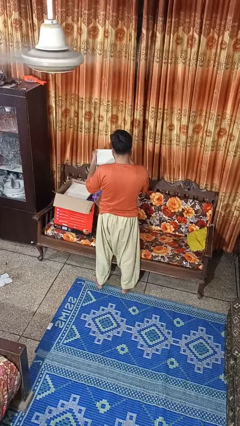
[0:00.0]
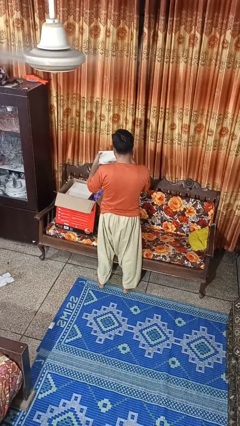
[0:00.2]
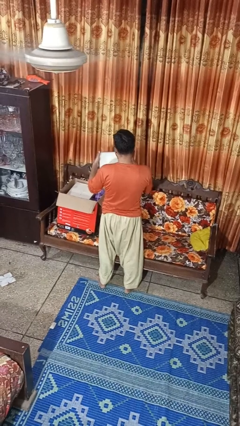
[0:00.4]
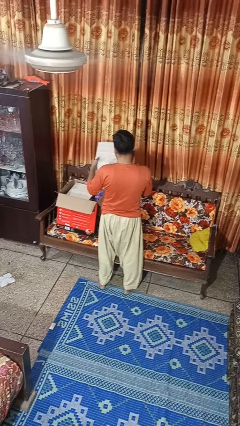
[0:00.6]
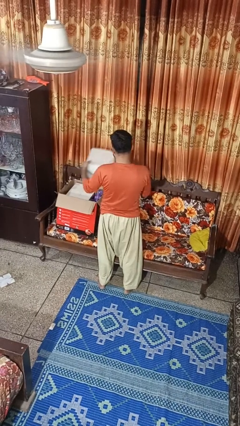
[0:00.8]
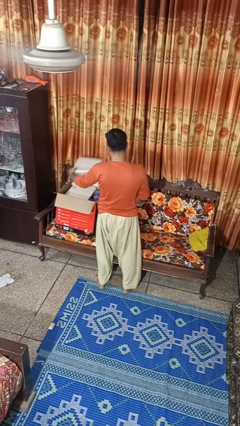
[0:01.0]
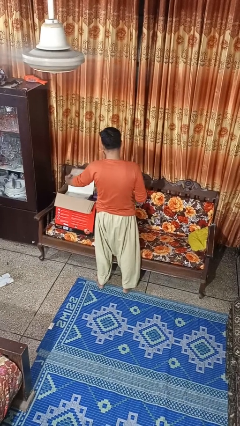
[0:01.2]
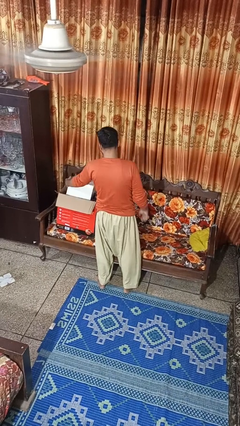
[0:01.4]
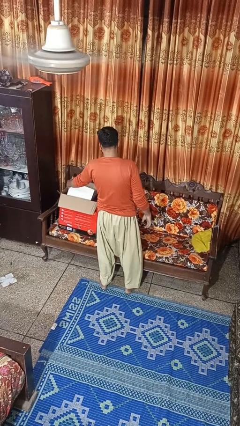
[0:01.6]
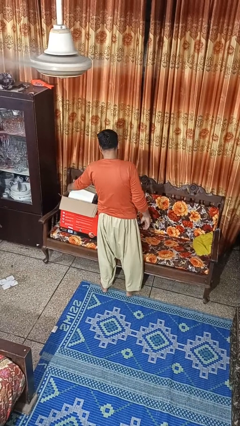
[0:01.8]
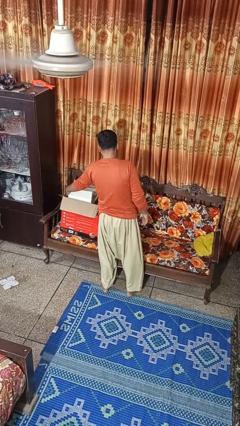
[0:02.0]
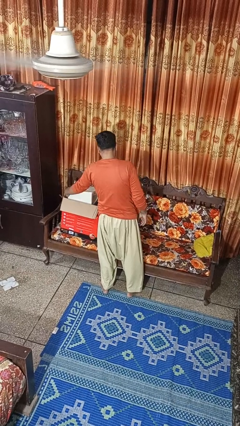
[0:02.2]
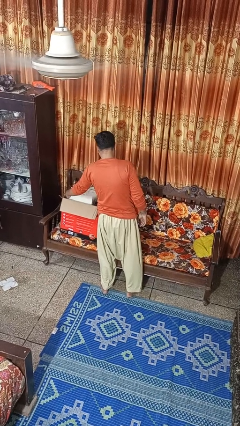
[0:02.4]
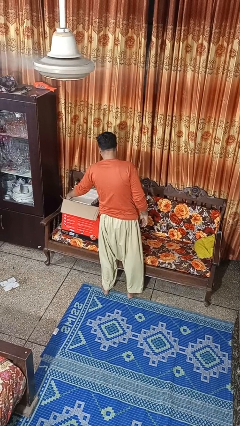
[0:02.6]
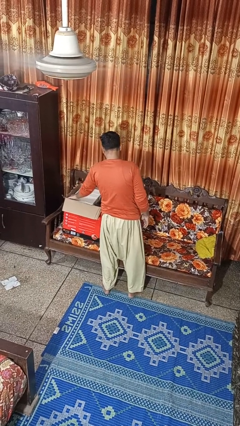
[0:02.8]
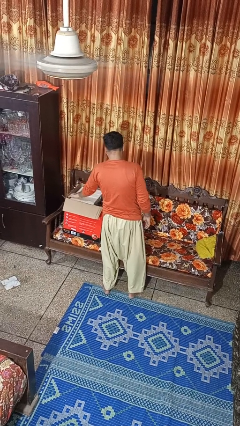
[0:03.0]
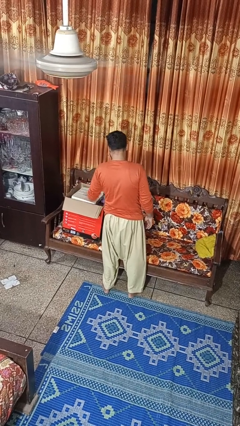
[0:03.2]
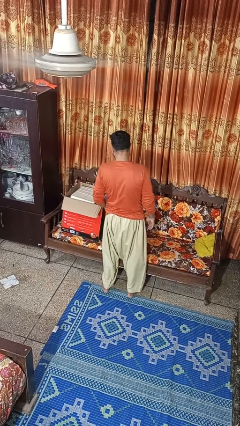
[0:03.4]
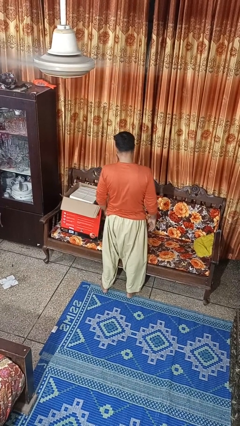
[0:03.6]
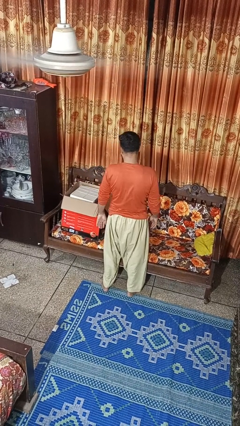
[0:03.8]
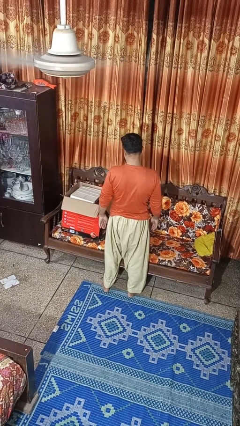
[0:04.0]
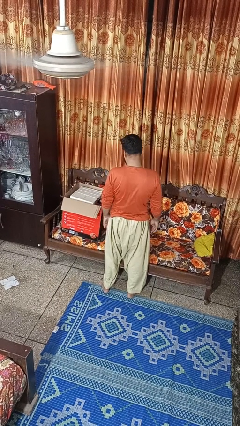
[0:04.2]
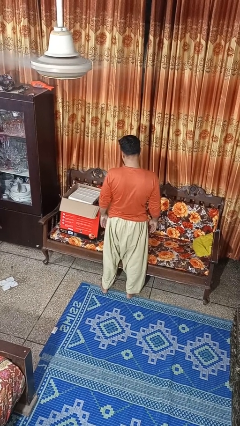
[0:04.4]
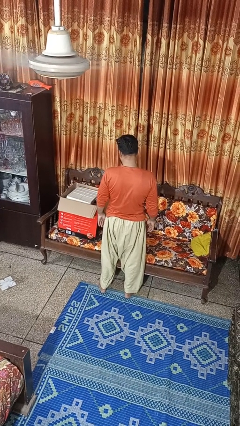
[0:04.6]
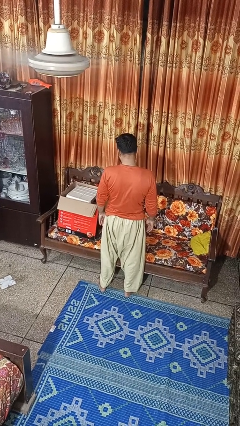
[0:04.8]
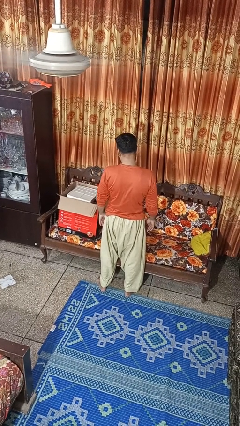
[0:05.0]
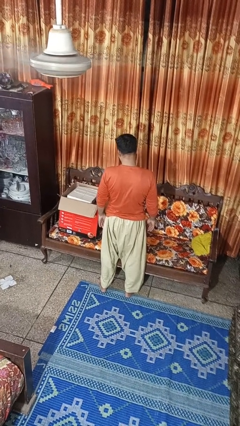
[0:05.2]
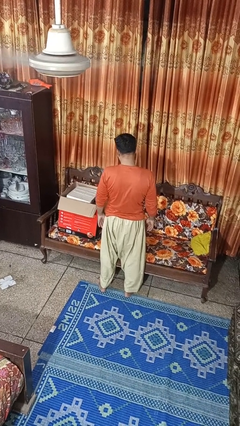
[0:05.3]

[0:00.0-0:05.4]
person puts object into box

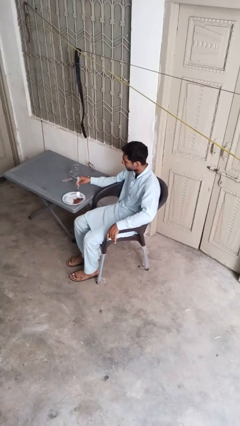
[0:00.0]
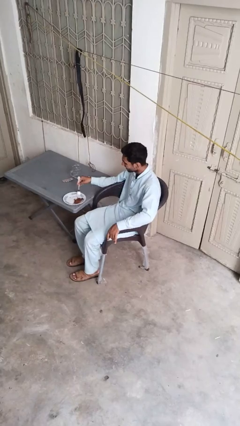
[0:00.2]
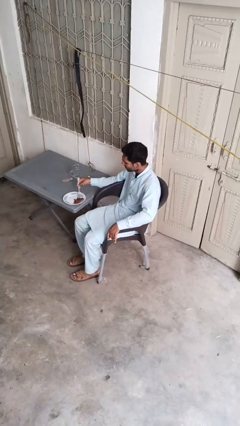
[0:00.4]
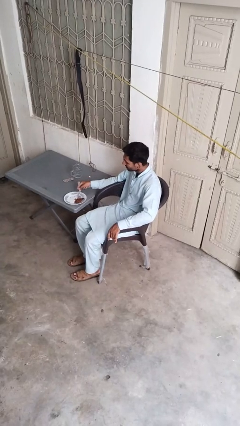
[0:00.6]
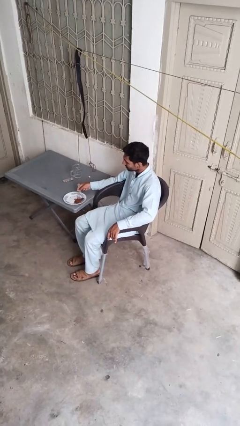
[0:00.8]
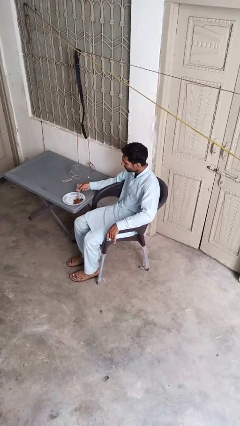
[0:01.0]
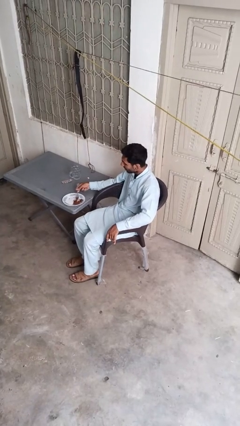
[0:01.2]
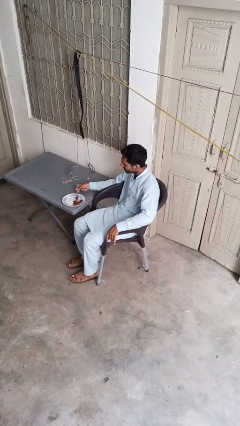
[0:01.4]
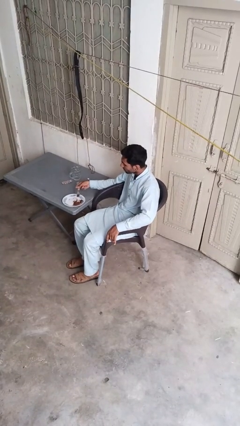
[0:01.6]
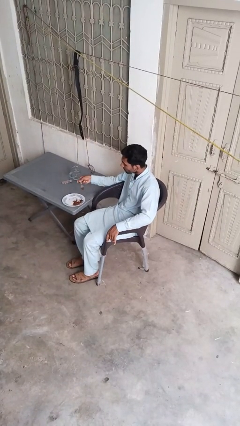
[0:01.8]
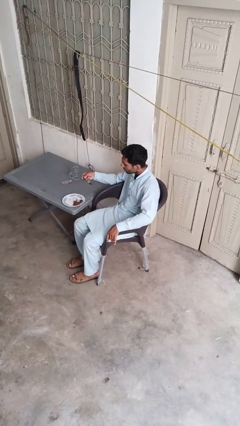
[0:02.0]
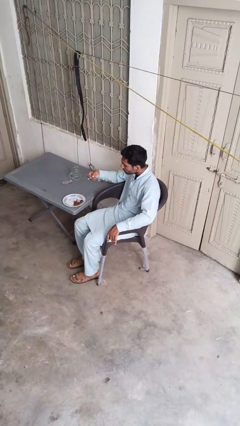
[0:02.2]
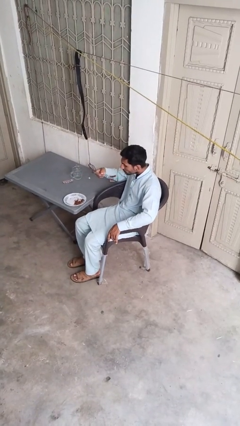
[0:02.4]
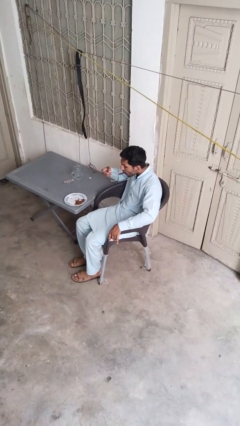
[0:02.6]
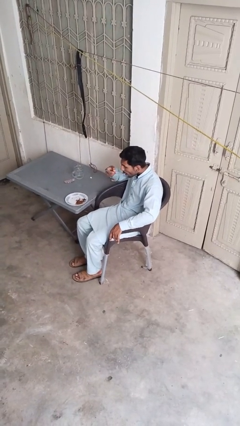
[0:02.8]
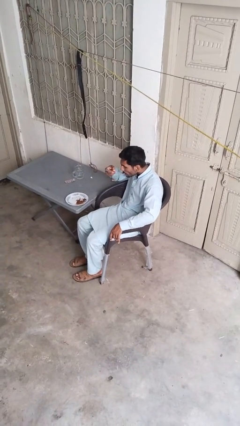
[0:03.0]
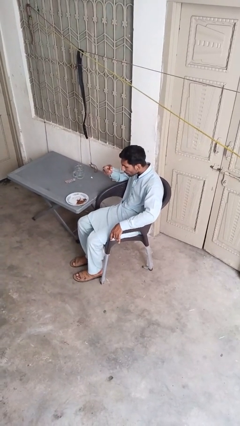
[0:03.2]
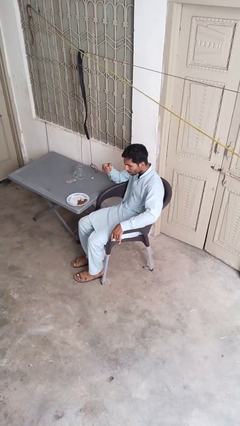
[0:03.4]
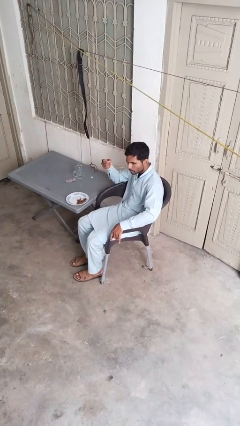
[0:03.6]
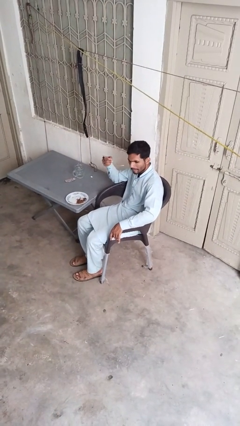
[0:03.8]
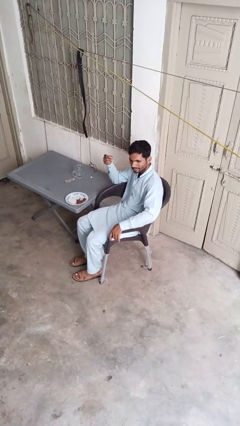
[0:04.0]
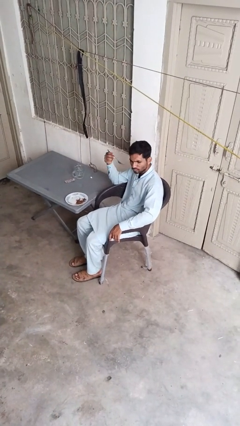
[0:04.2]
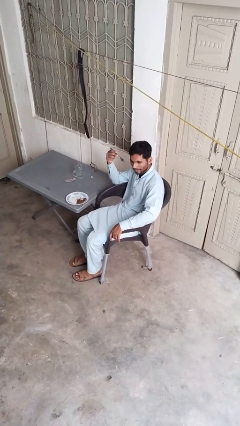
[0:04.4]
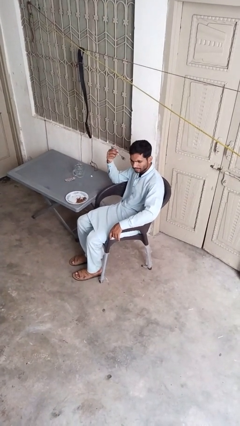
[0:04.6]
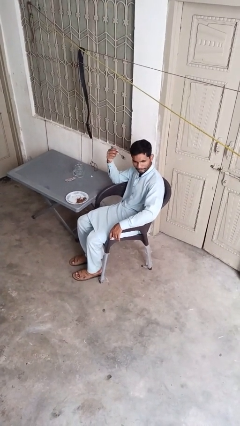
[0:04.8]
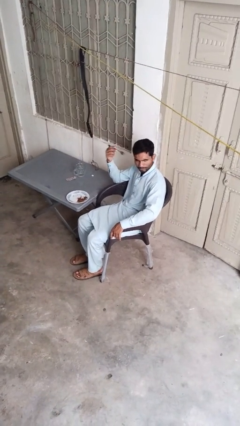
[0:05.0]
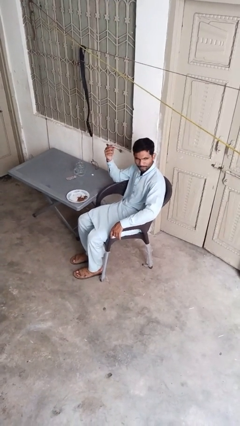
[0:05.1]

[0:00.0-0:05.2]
person eats with utensil

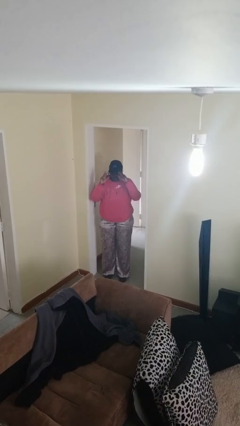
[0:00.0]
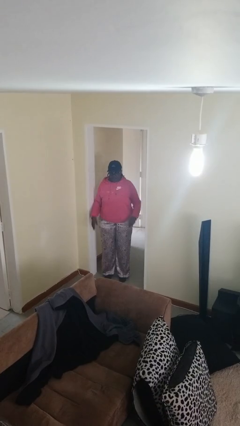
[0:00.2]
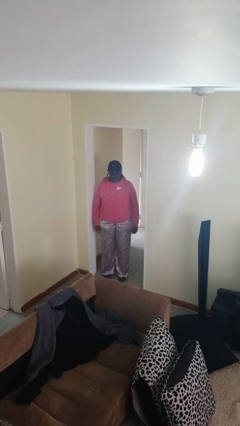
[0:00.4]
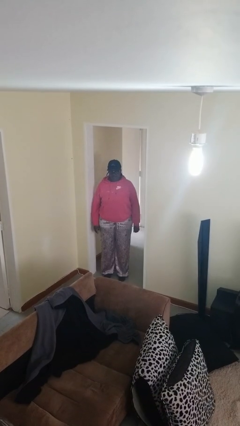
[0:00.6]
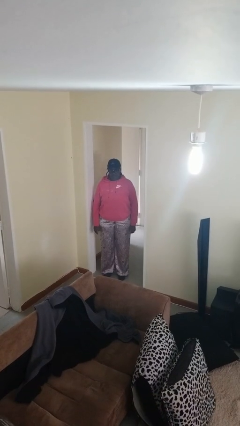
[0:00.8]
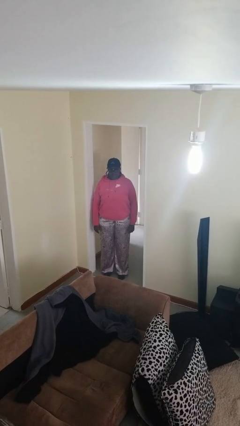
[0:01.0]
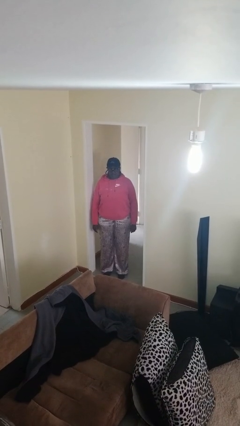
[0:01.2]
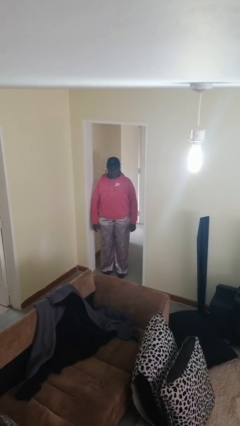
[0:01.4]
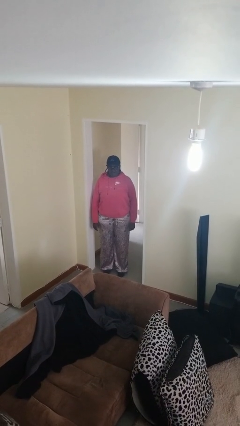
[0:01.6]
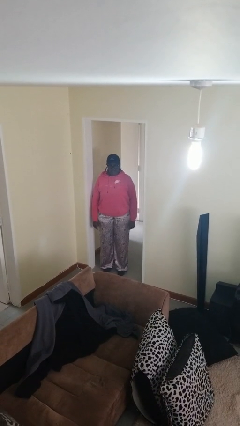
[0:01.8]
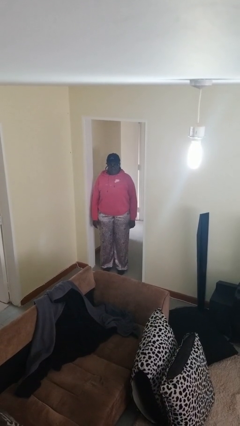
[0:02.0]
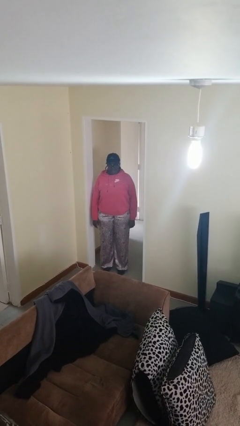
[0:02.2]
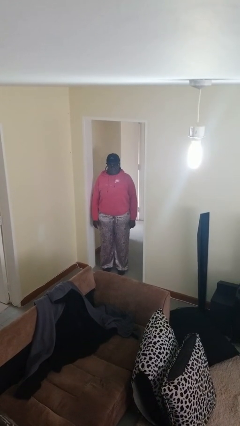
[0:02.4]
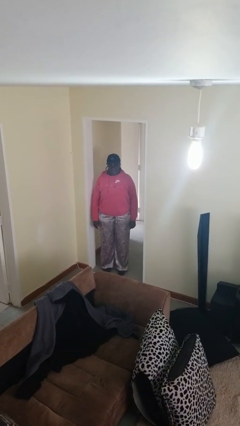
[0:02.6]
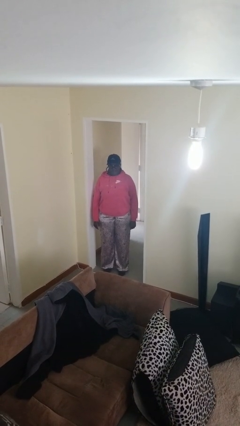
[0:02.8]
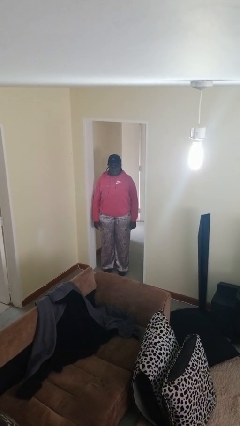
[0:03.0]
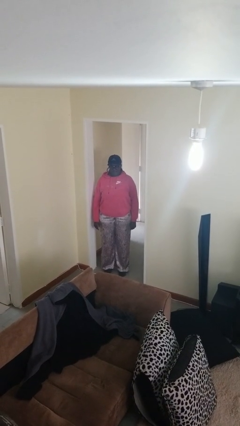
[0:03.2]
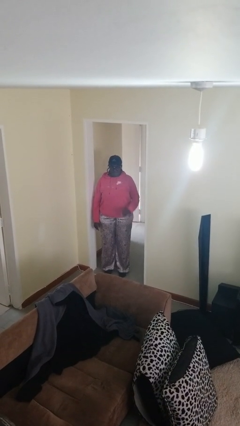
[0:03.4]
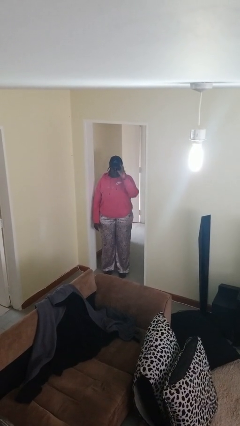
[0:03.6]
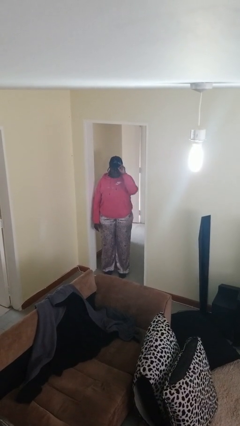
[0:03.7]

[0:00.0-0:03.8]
person puts on hat

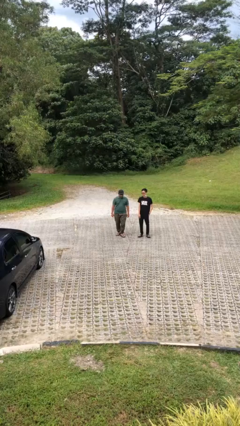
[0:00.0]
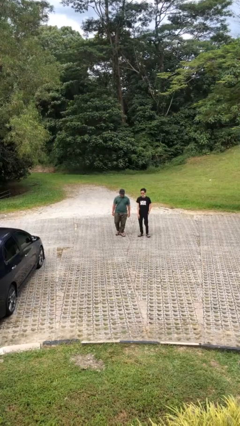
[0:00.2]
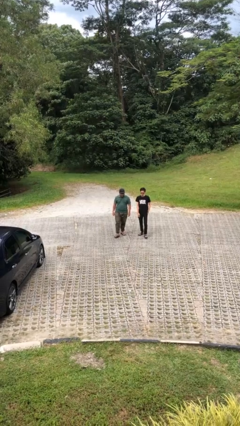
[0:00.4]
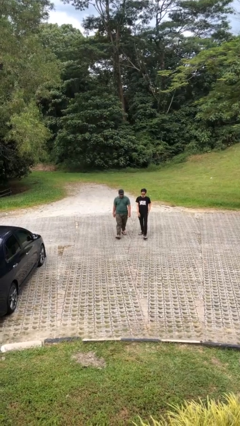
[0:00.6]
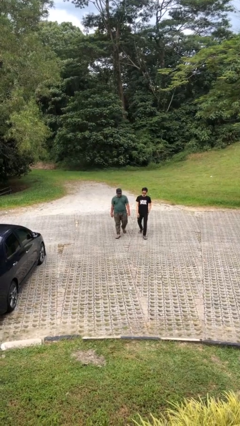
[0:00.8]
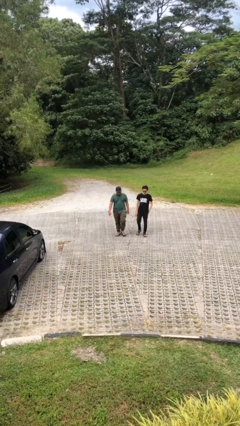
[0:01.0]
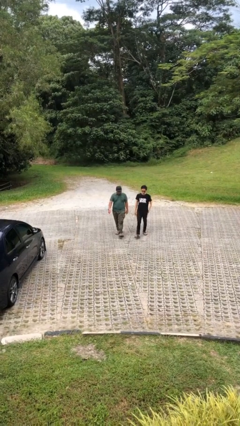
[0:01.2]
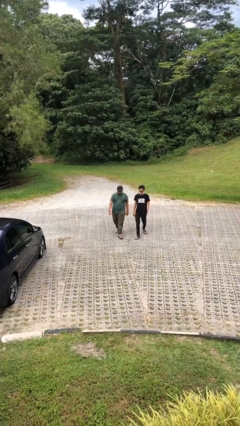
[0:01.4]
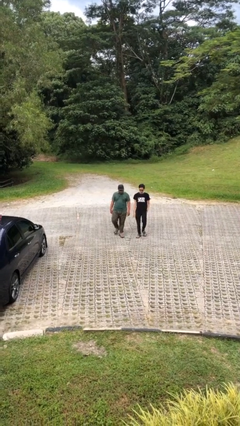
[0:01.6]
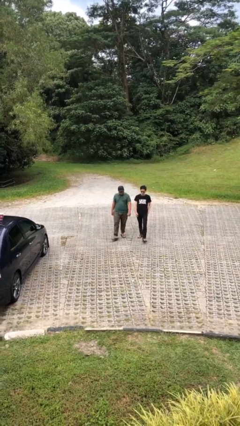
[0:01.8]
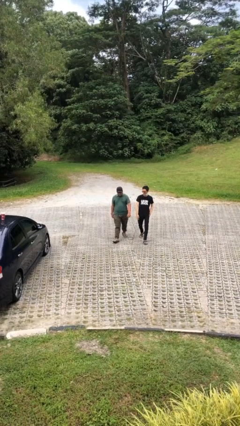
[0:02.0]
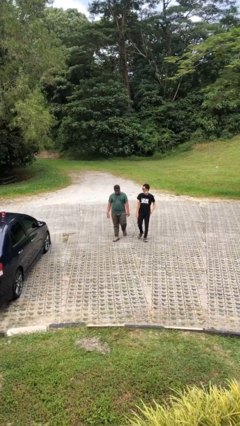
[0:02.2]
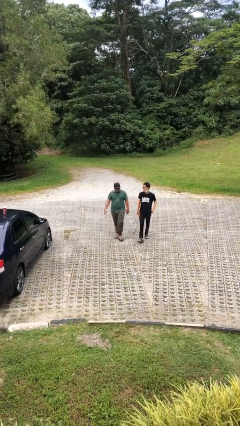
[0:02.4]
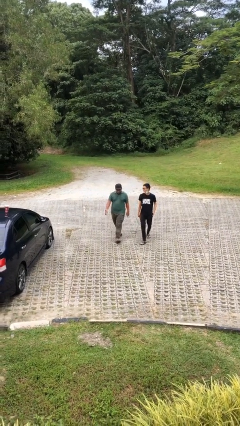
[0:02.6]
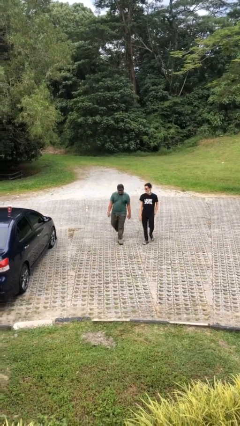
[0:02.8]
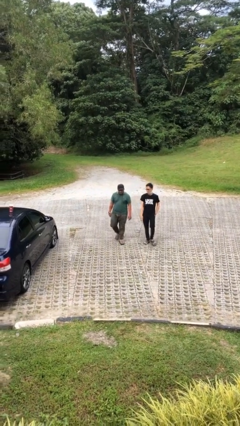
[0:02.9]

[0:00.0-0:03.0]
person talks to person
